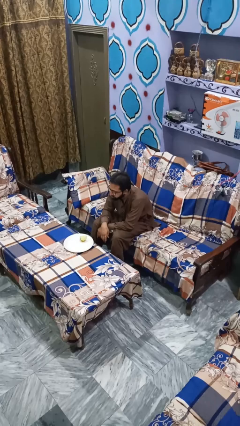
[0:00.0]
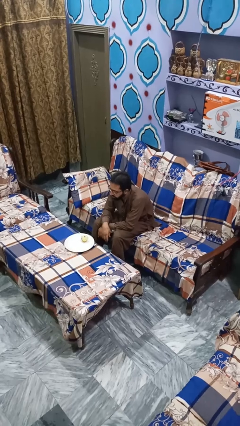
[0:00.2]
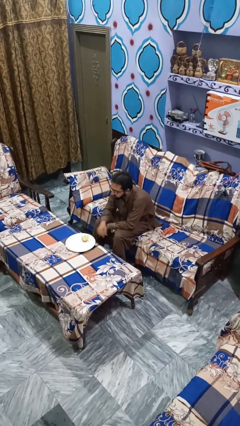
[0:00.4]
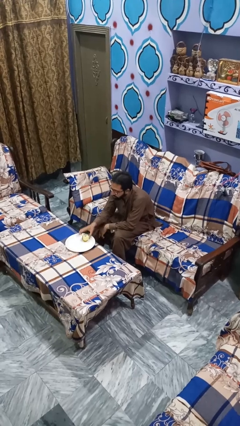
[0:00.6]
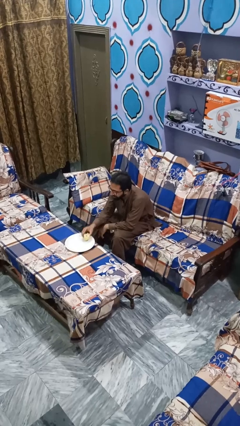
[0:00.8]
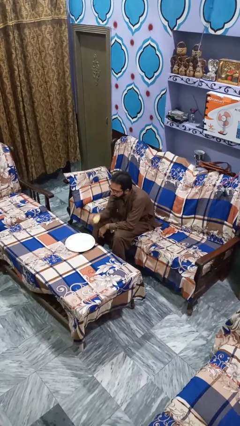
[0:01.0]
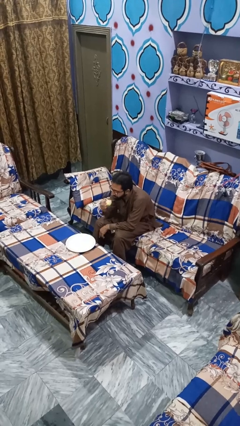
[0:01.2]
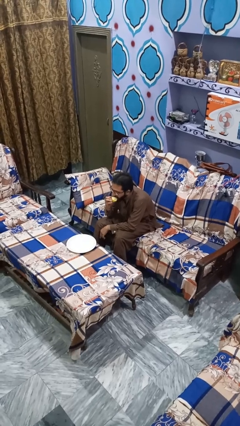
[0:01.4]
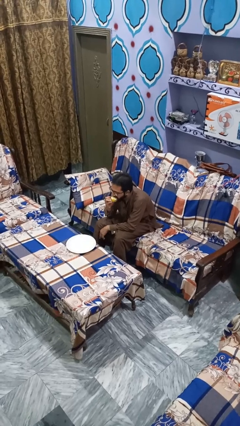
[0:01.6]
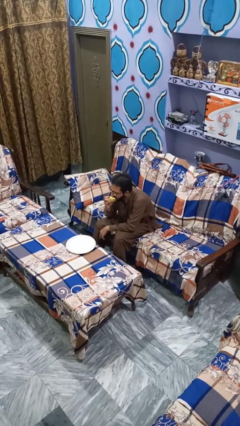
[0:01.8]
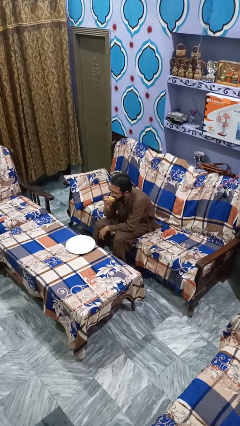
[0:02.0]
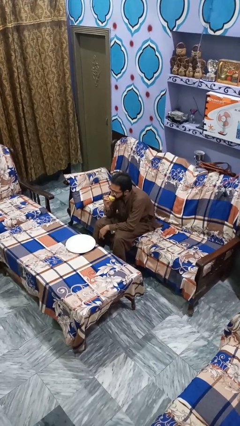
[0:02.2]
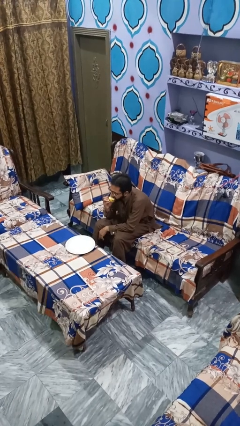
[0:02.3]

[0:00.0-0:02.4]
person eats apple

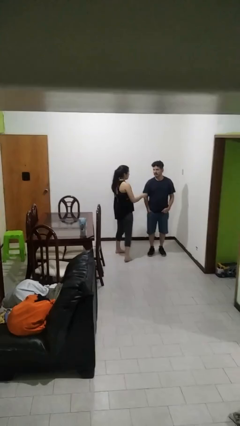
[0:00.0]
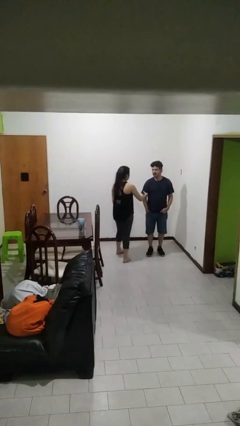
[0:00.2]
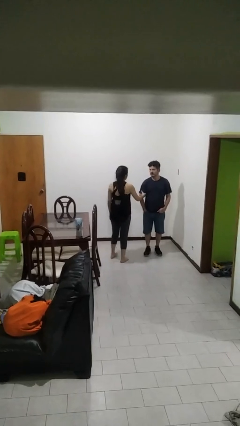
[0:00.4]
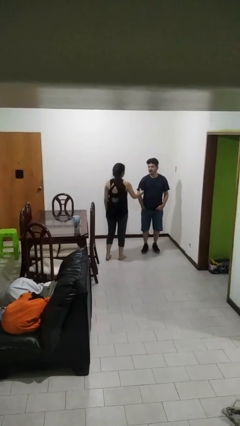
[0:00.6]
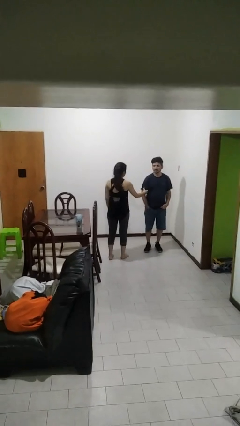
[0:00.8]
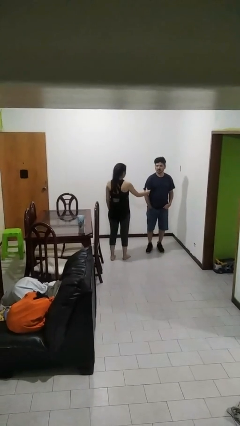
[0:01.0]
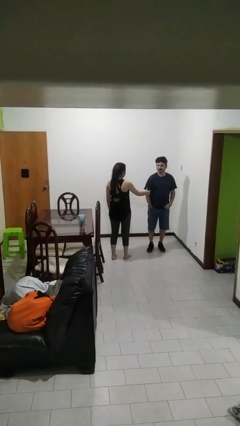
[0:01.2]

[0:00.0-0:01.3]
person grabs person by bicep

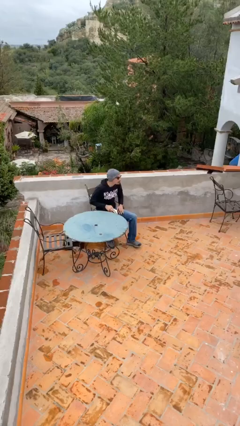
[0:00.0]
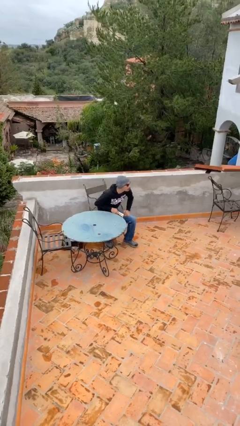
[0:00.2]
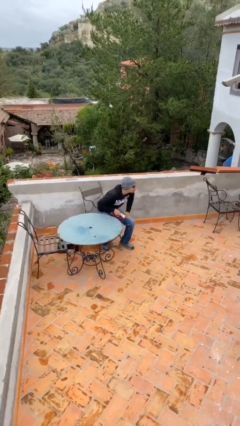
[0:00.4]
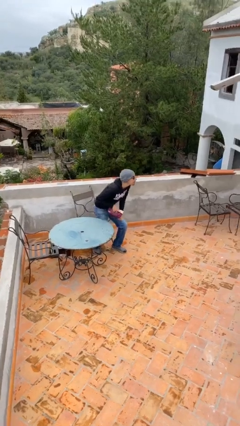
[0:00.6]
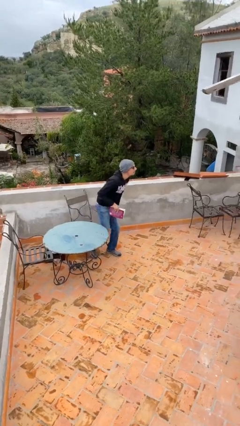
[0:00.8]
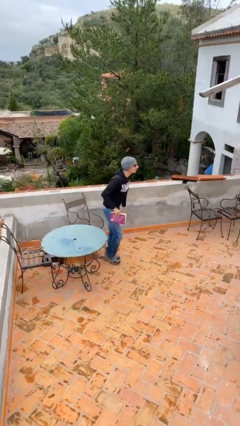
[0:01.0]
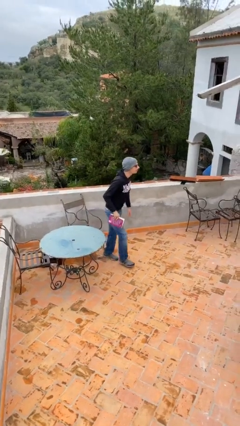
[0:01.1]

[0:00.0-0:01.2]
person stands up

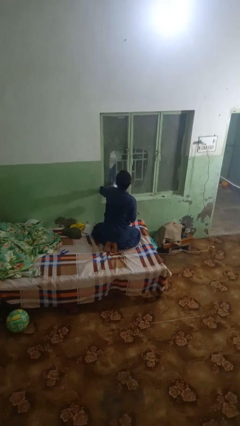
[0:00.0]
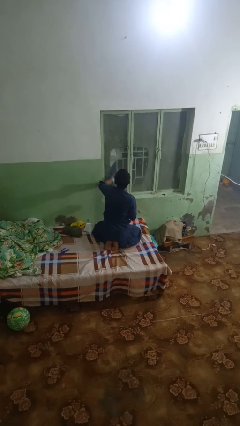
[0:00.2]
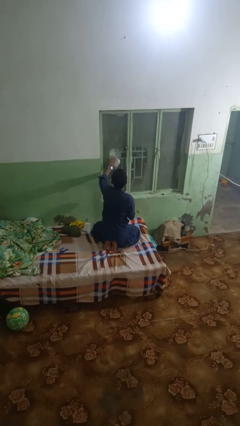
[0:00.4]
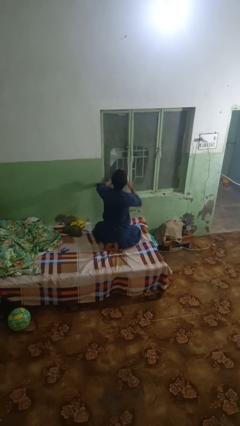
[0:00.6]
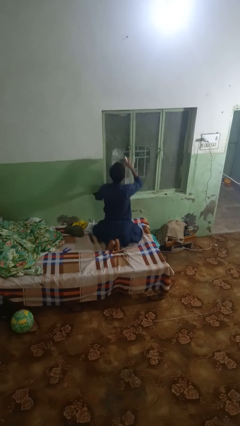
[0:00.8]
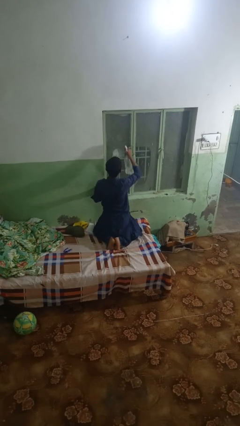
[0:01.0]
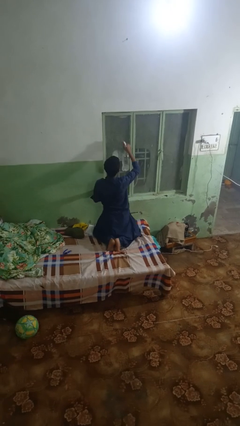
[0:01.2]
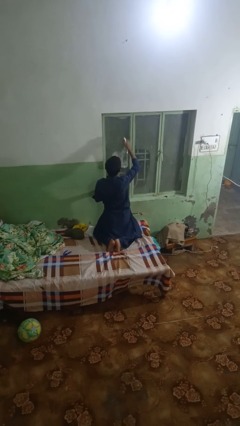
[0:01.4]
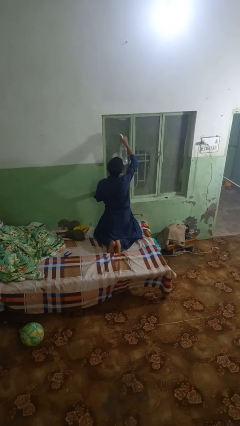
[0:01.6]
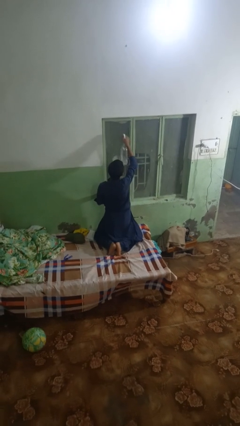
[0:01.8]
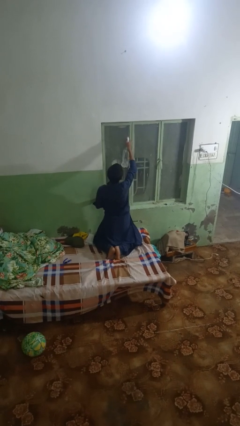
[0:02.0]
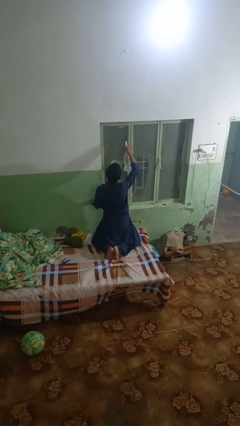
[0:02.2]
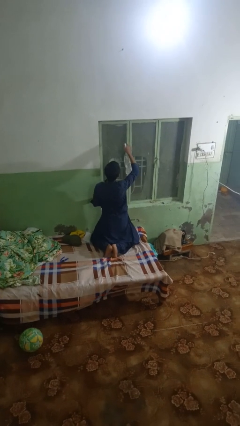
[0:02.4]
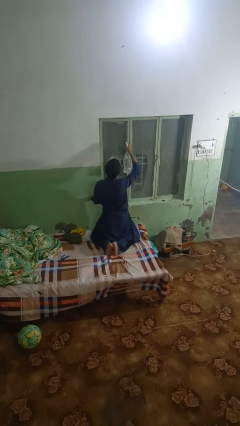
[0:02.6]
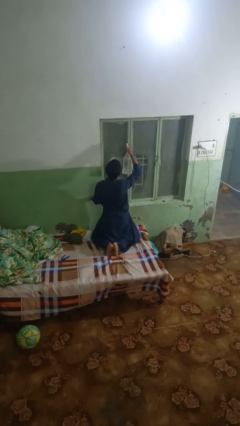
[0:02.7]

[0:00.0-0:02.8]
person sprays from bottle

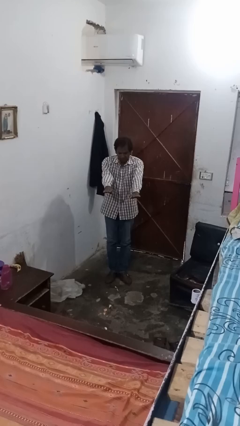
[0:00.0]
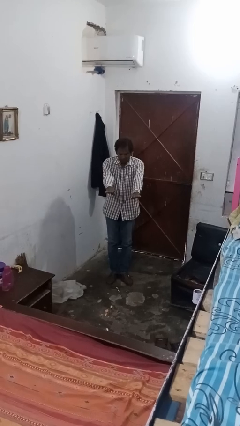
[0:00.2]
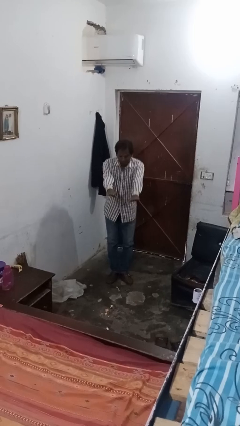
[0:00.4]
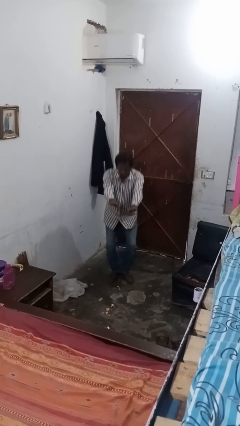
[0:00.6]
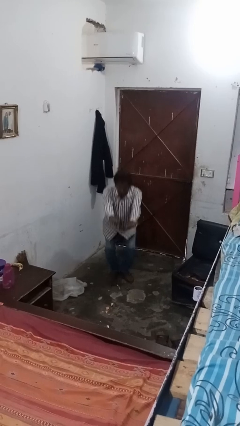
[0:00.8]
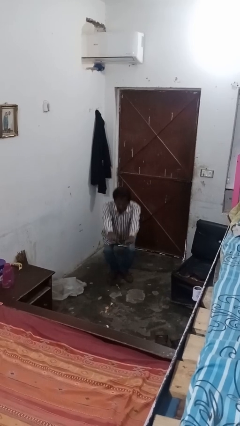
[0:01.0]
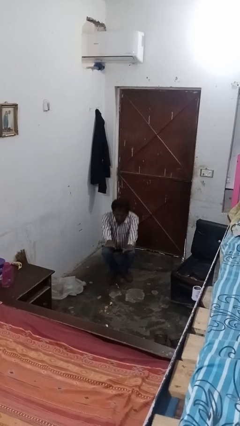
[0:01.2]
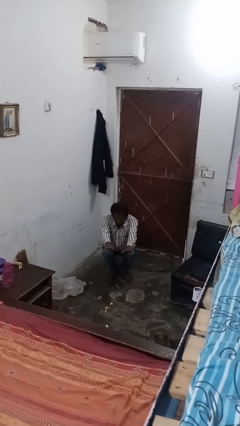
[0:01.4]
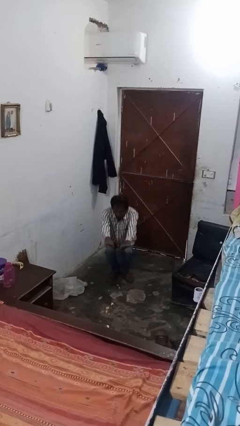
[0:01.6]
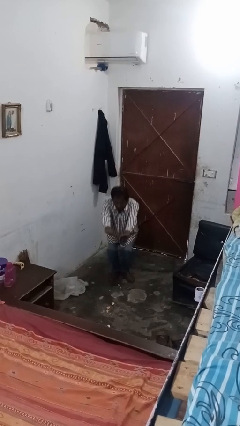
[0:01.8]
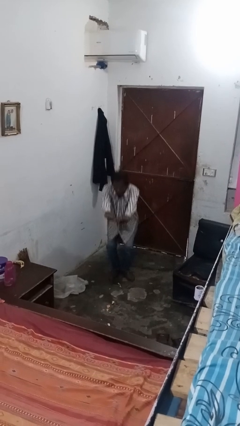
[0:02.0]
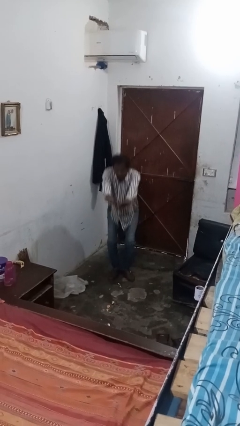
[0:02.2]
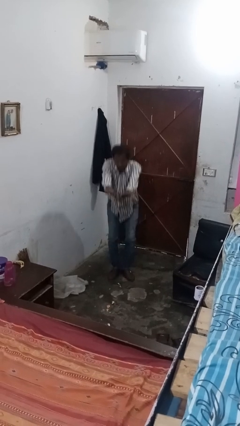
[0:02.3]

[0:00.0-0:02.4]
person squats

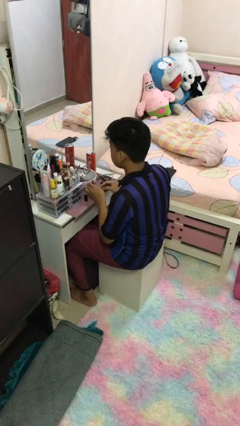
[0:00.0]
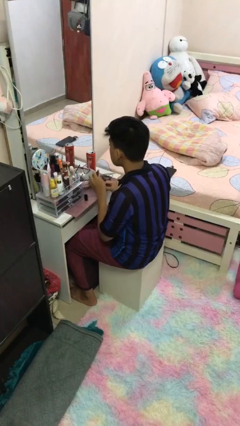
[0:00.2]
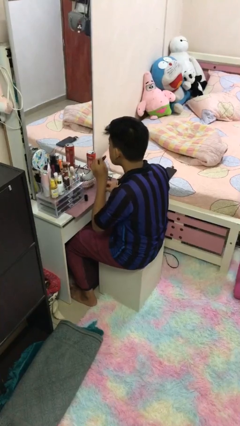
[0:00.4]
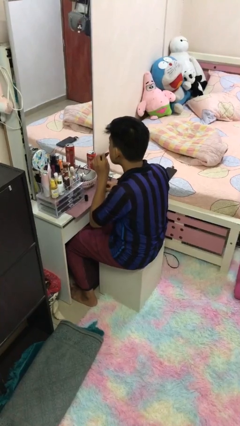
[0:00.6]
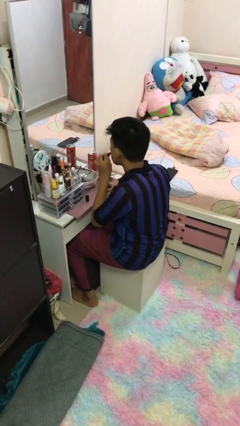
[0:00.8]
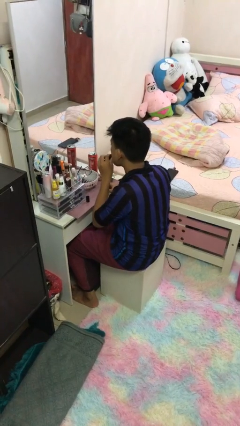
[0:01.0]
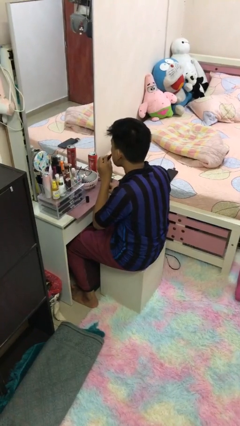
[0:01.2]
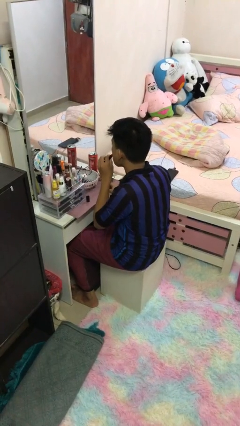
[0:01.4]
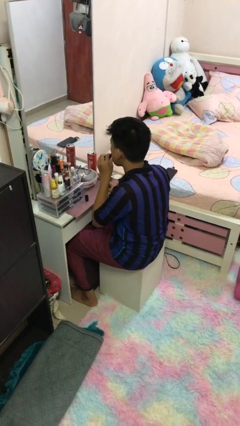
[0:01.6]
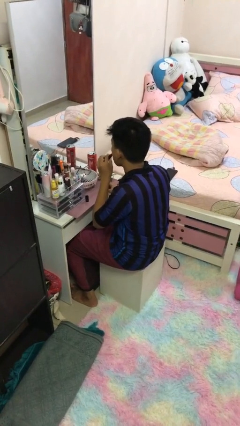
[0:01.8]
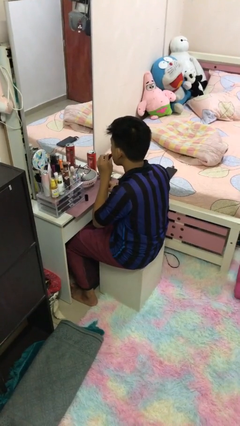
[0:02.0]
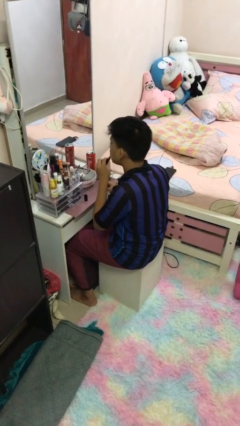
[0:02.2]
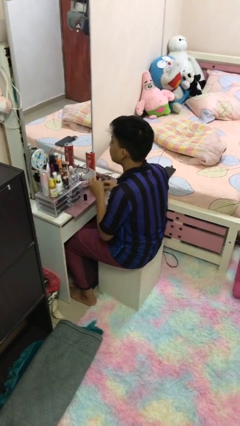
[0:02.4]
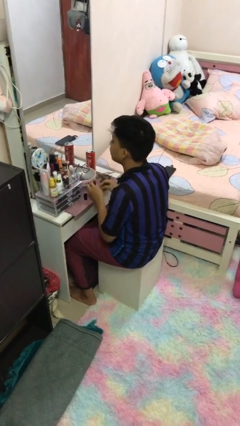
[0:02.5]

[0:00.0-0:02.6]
person applies lip makeup

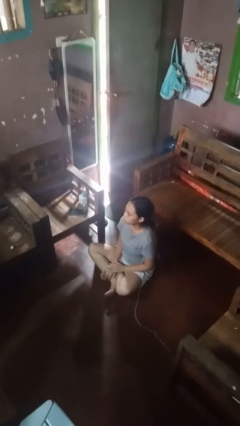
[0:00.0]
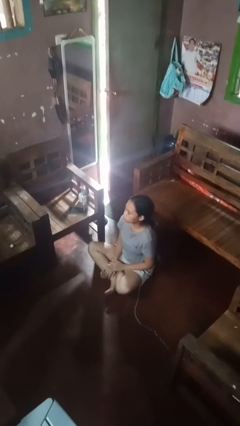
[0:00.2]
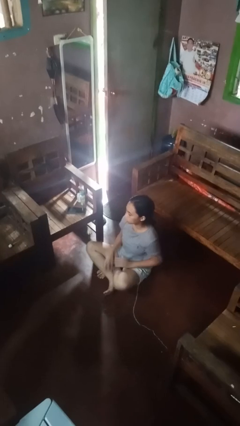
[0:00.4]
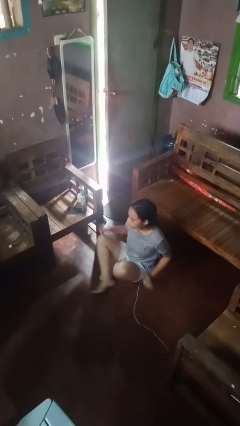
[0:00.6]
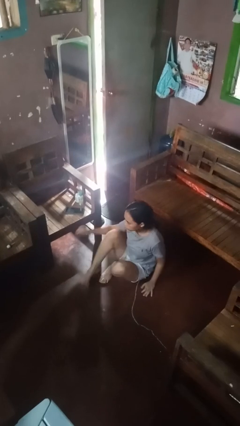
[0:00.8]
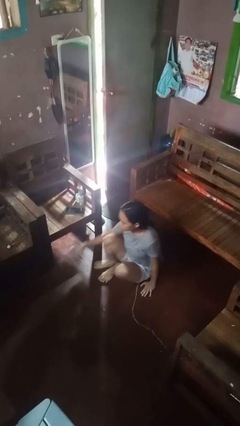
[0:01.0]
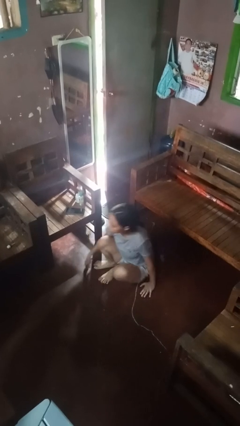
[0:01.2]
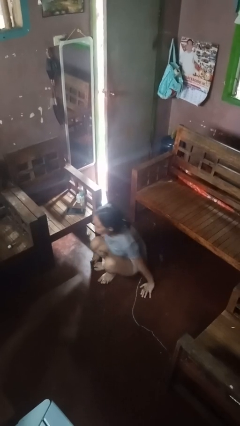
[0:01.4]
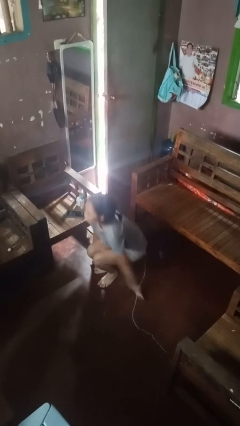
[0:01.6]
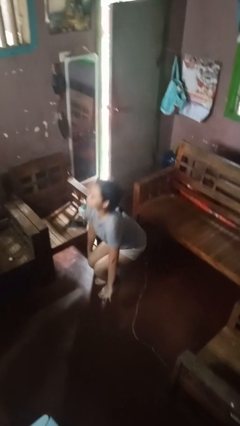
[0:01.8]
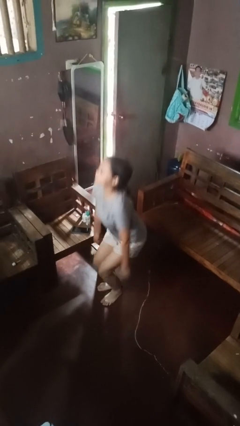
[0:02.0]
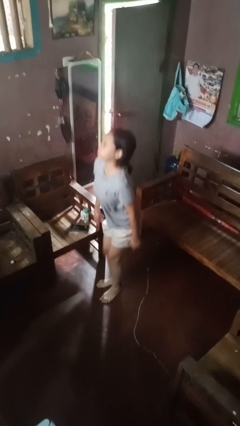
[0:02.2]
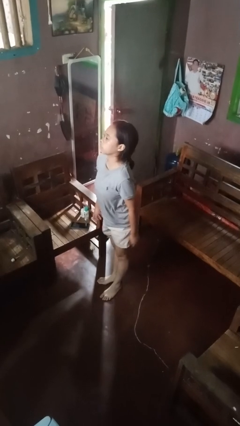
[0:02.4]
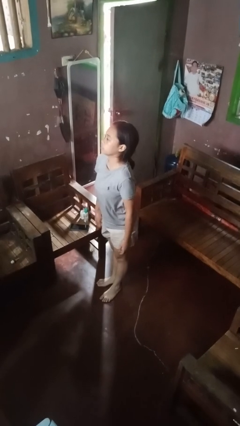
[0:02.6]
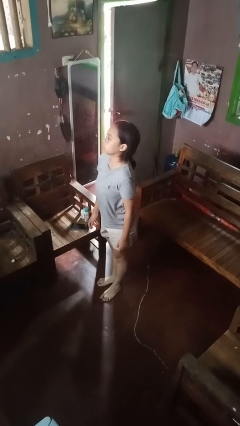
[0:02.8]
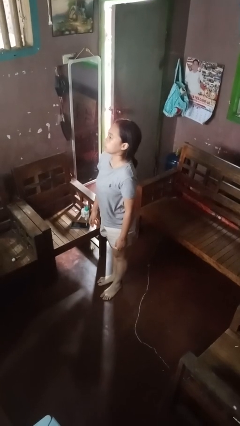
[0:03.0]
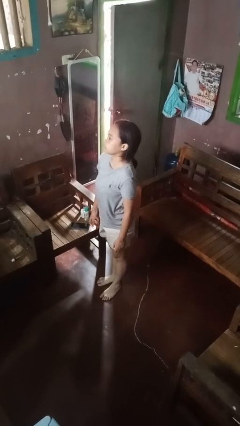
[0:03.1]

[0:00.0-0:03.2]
person stands up from floor

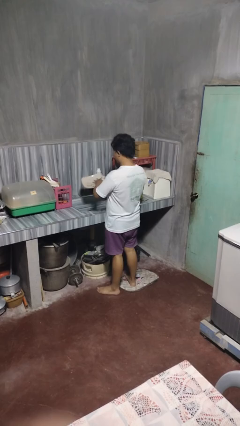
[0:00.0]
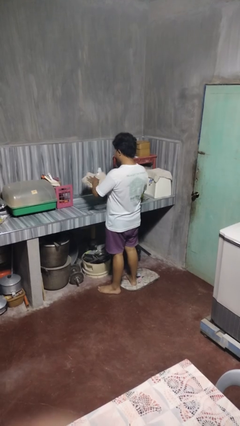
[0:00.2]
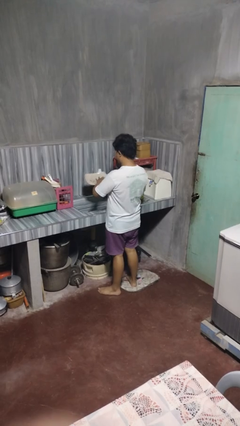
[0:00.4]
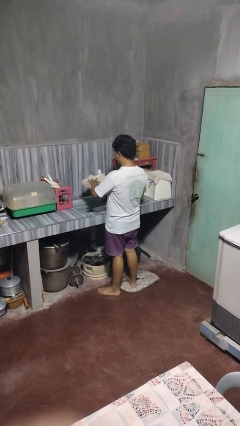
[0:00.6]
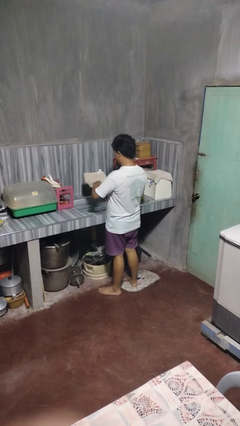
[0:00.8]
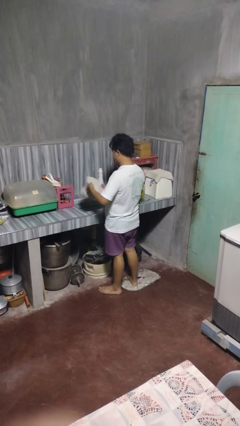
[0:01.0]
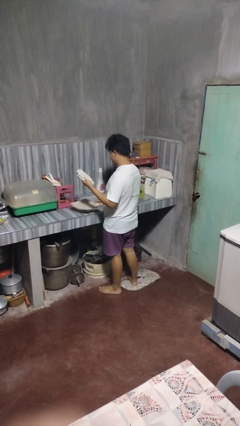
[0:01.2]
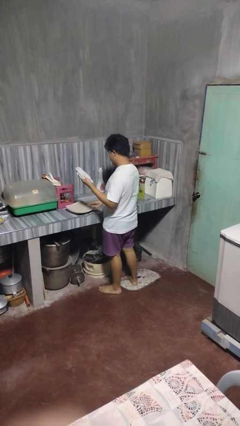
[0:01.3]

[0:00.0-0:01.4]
person dries dish
